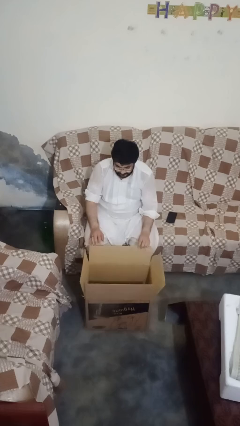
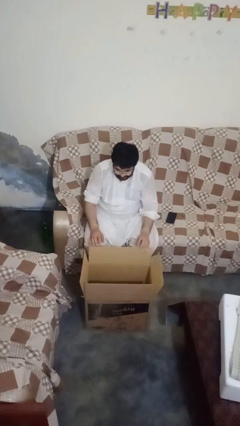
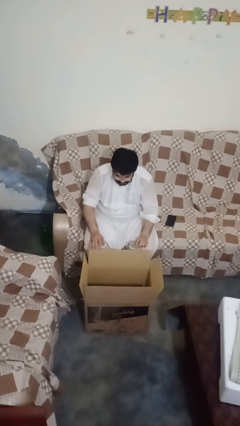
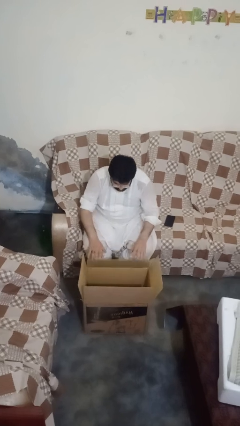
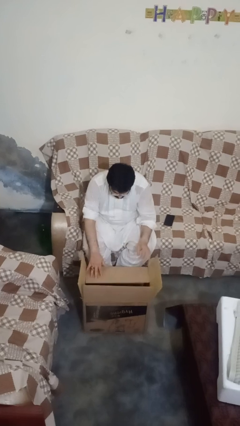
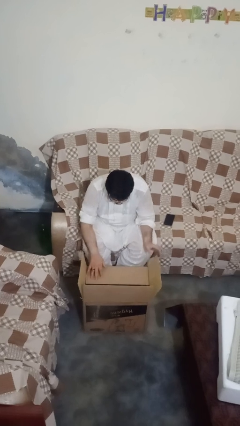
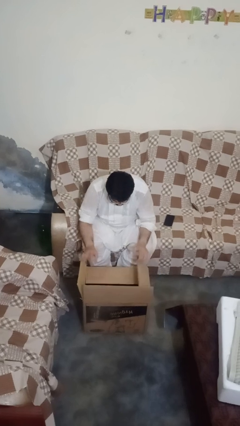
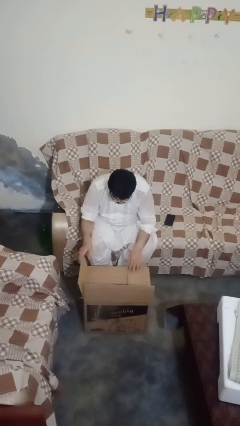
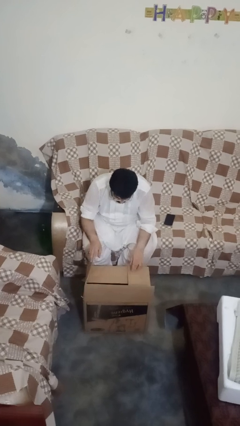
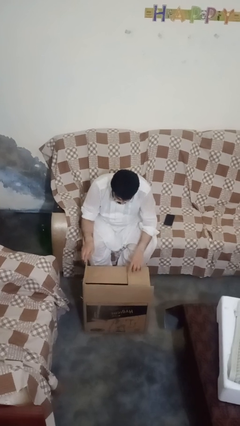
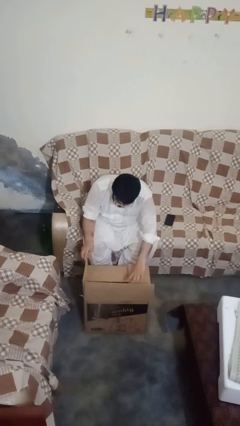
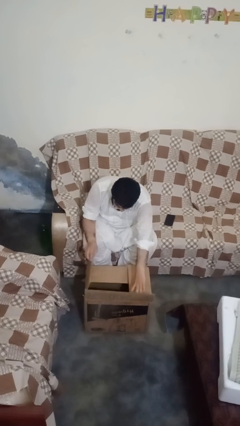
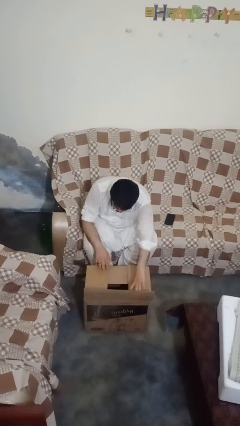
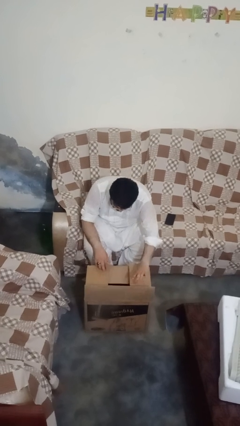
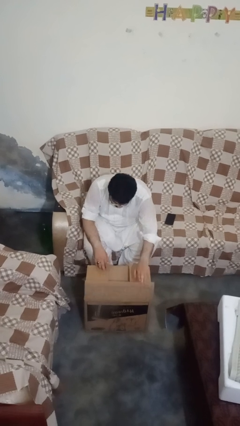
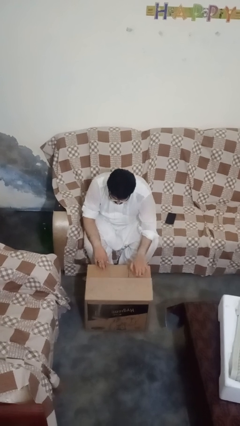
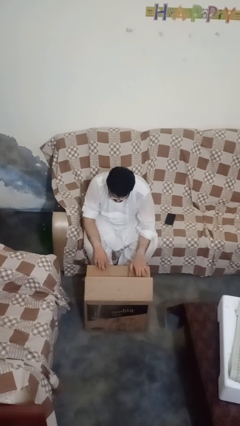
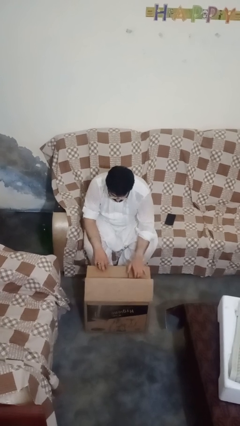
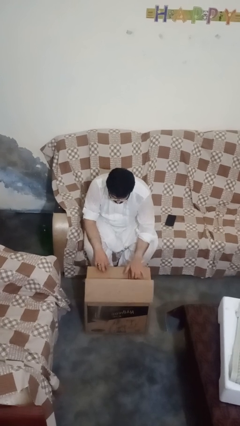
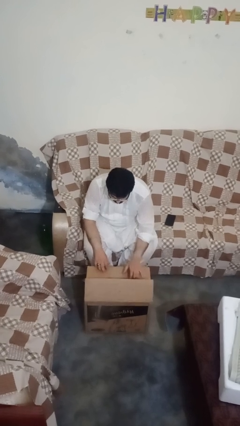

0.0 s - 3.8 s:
person closes box

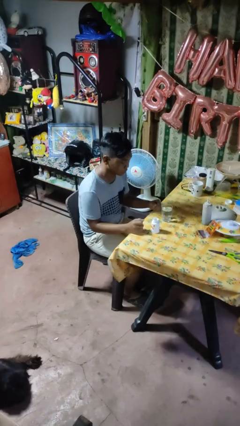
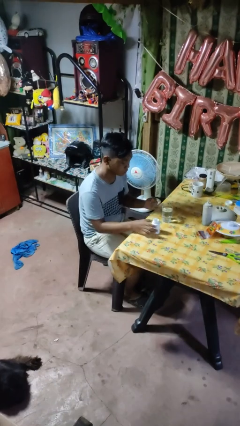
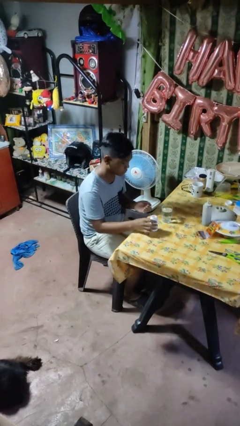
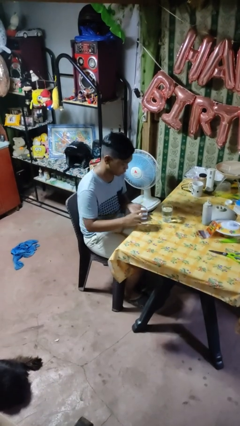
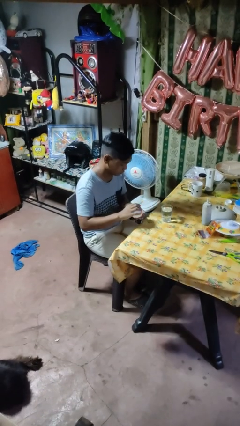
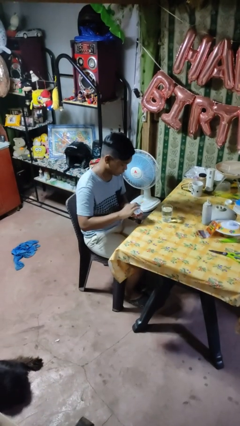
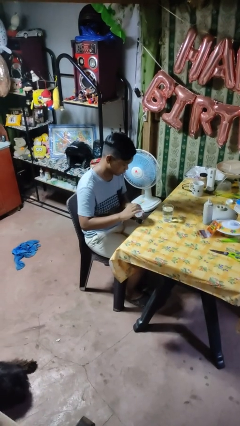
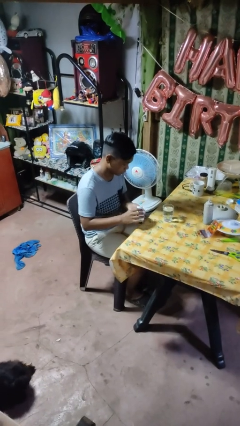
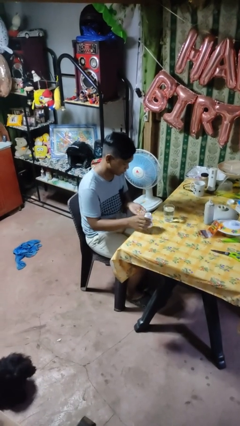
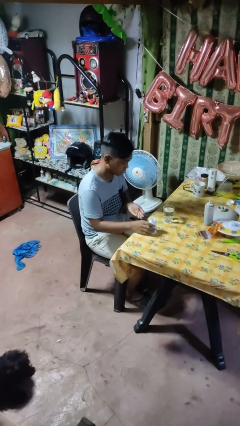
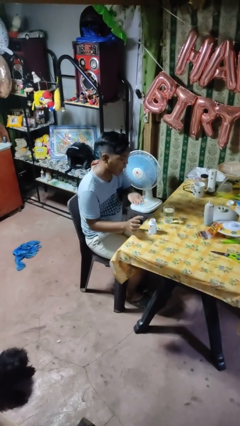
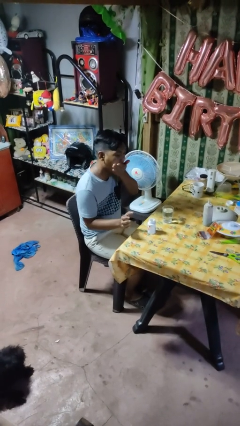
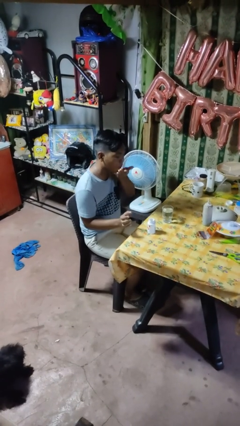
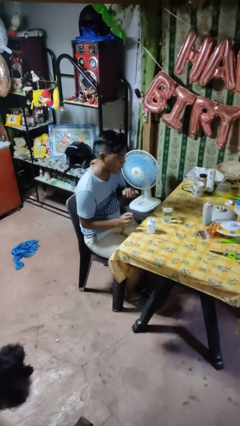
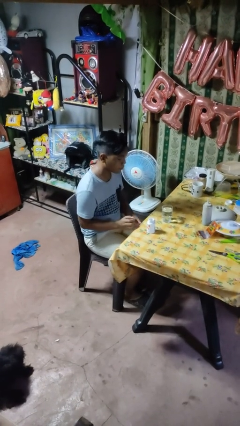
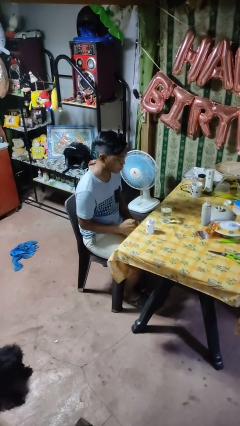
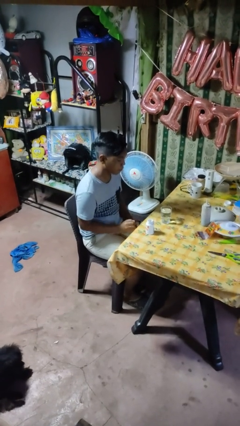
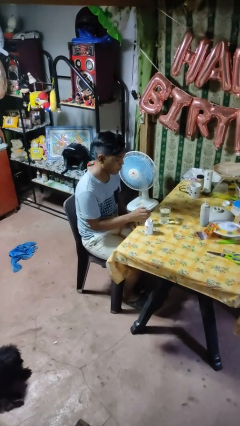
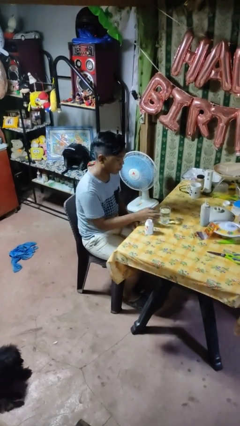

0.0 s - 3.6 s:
person takes medicine pills

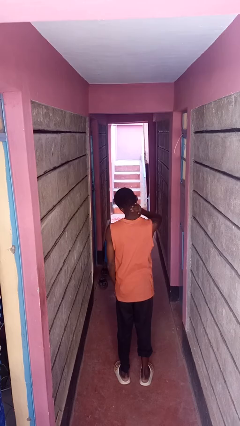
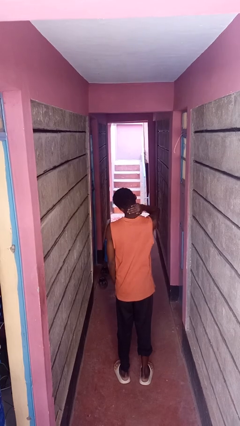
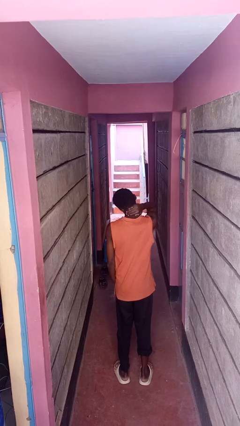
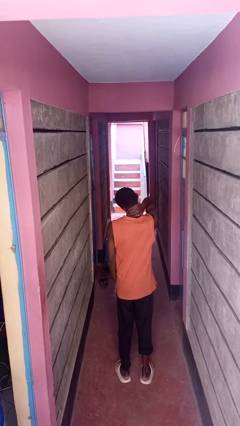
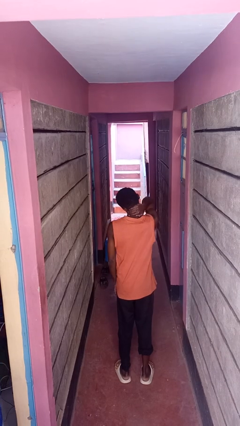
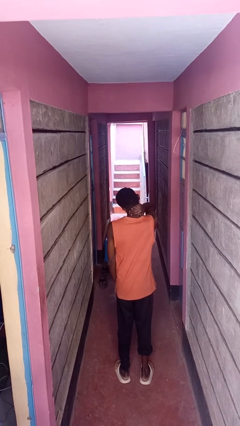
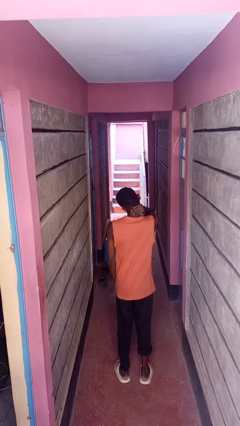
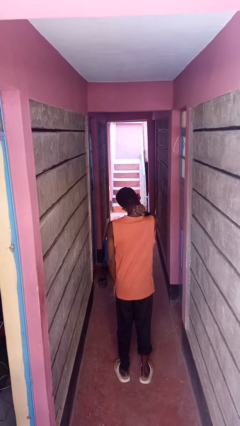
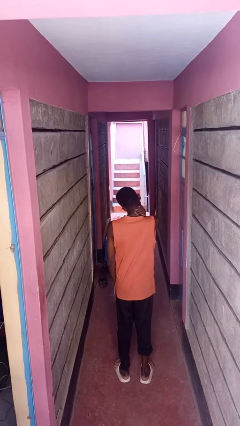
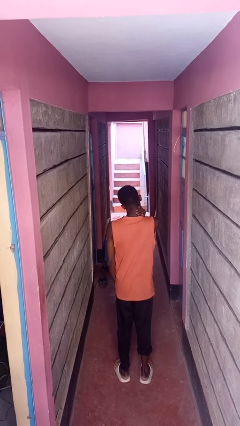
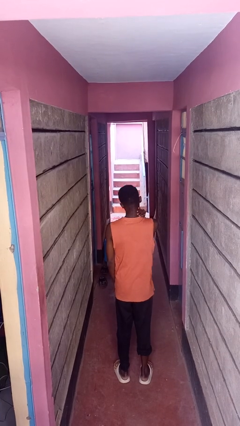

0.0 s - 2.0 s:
person rubs neck

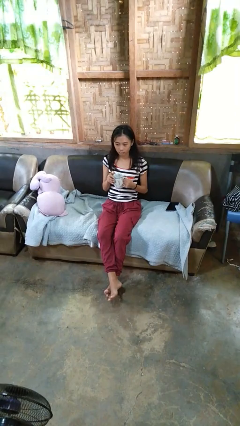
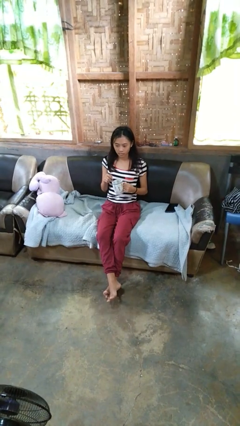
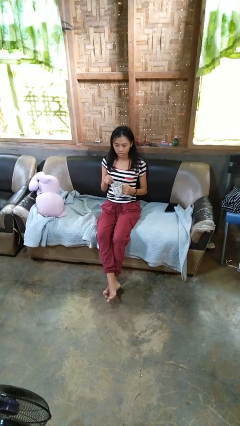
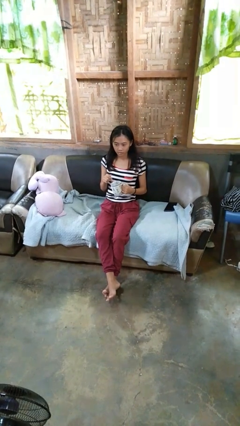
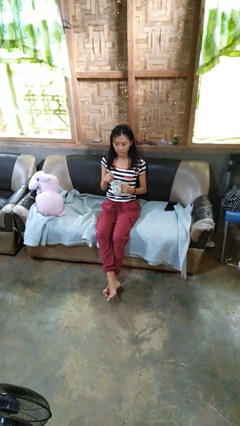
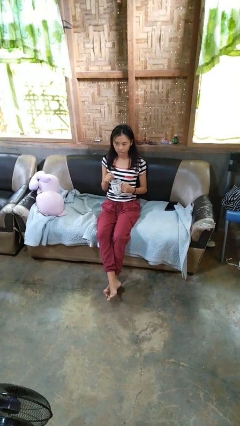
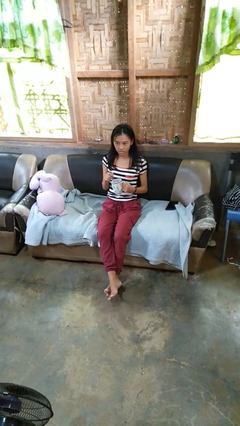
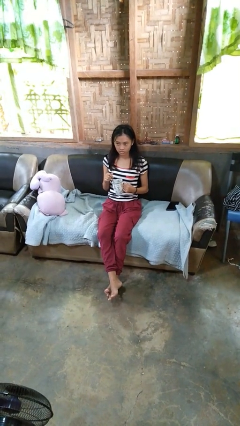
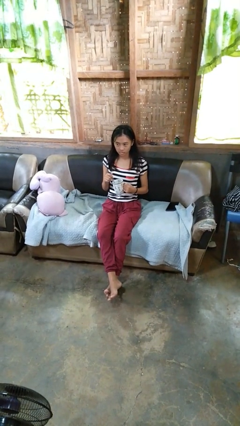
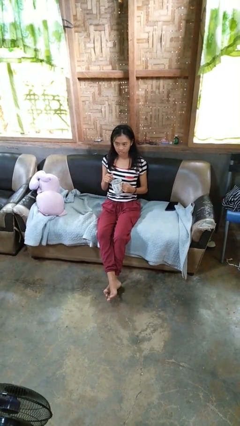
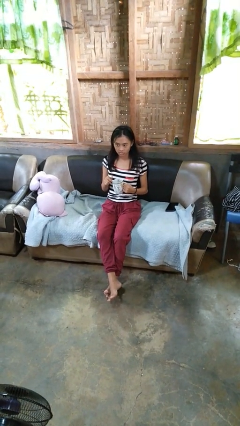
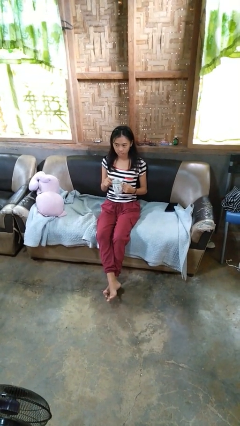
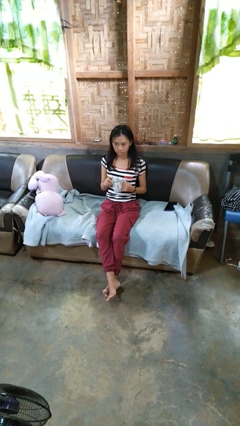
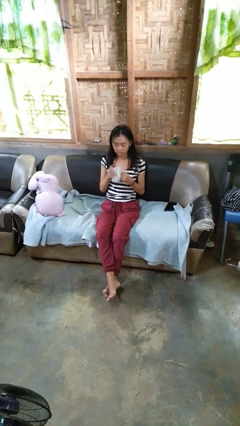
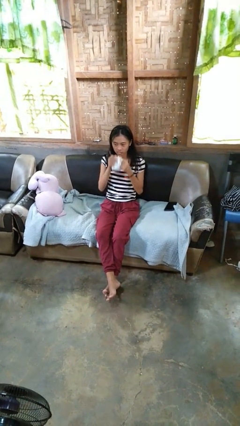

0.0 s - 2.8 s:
person stirs mug

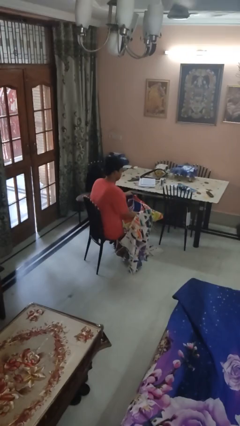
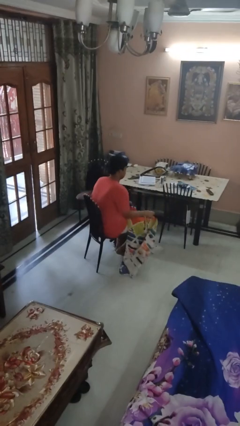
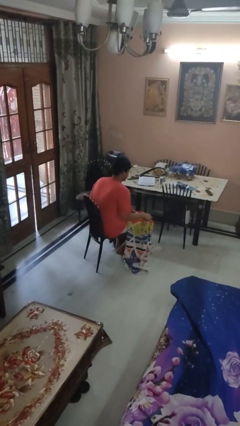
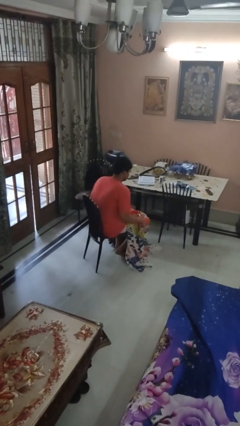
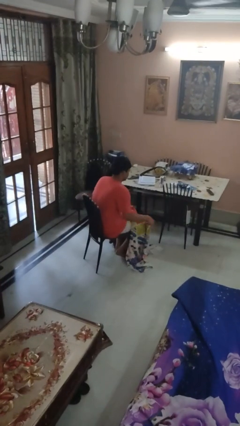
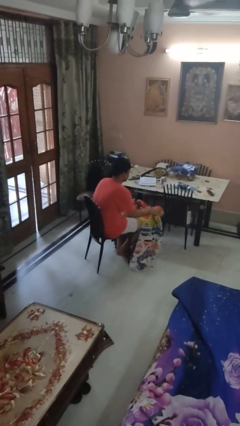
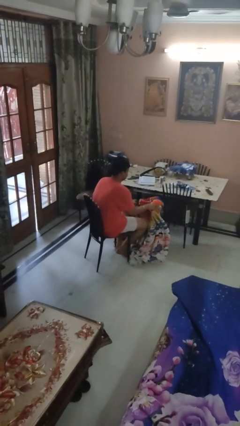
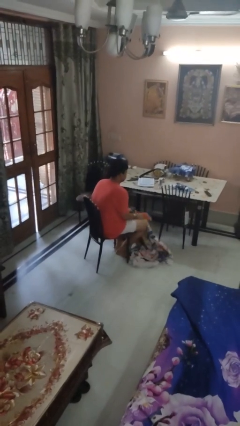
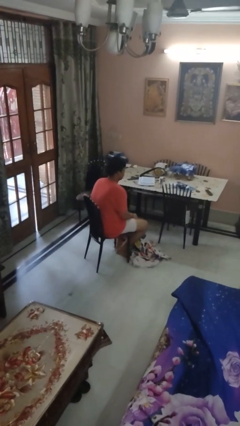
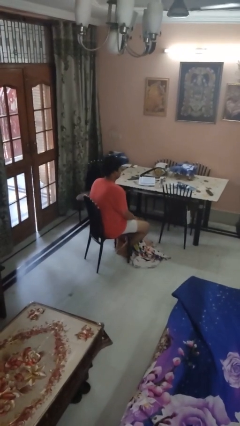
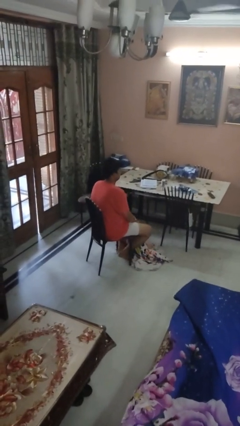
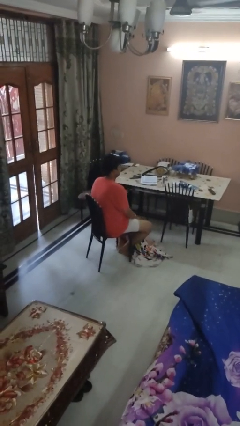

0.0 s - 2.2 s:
person uncovers with blanket

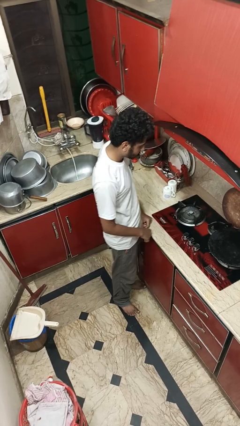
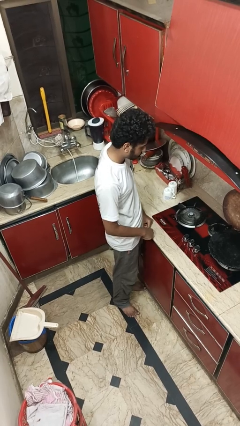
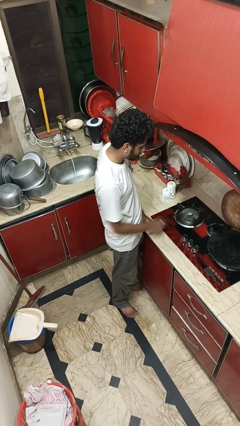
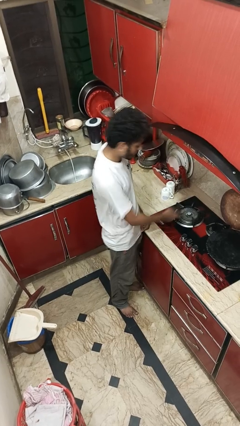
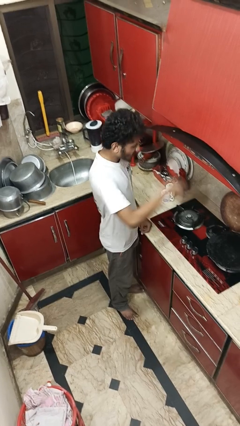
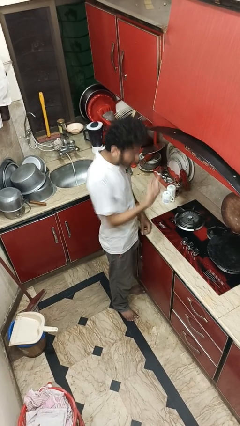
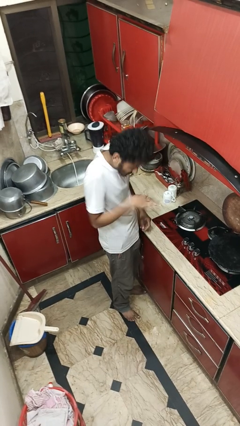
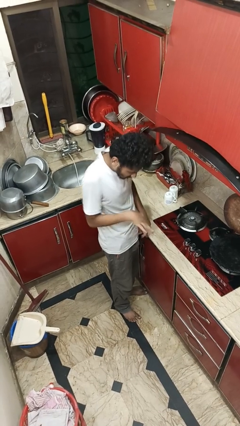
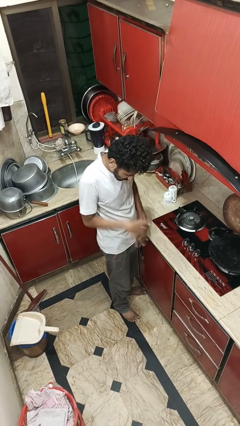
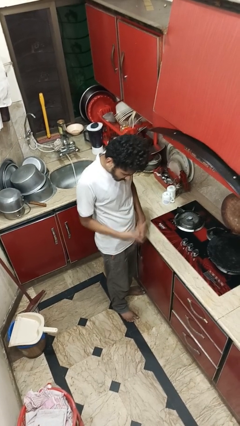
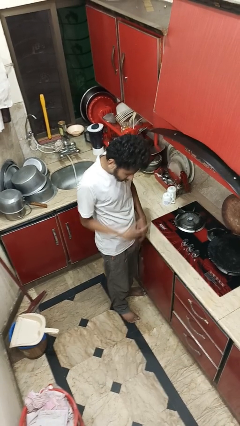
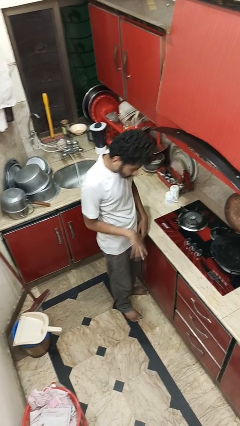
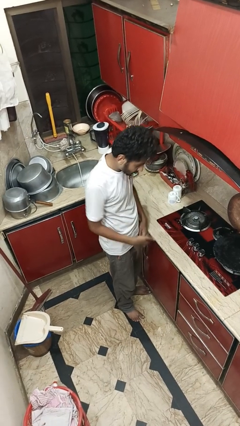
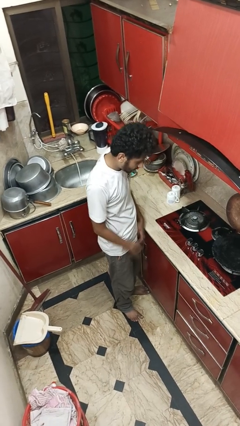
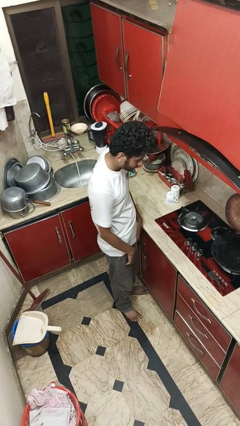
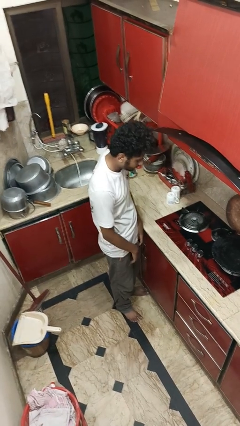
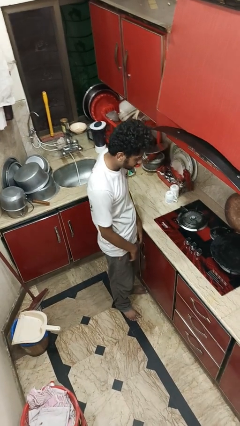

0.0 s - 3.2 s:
person burns hand
